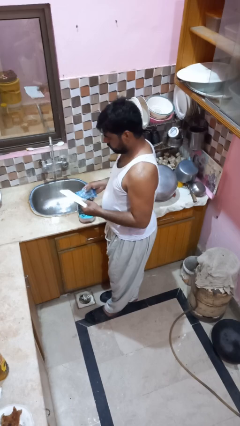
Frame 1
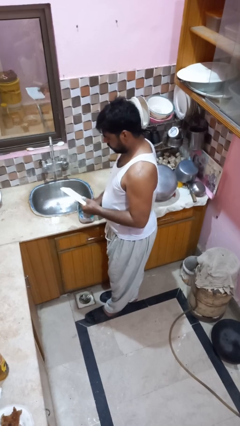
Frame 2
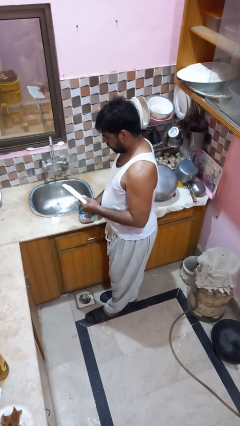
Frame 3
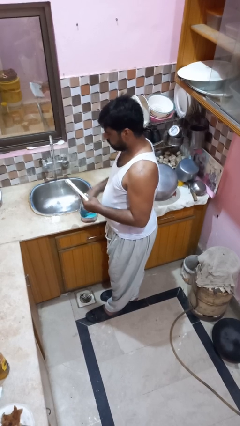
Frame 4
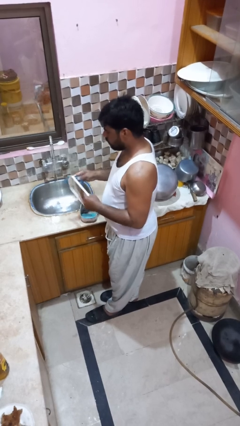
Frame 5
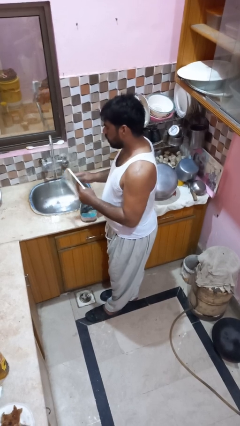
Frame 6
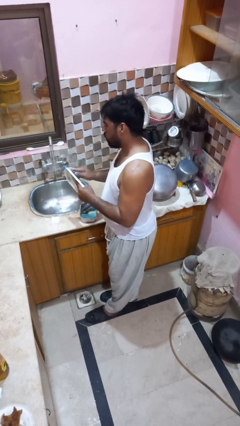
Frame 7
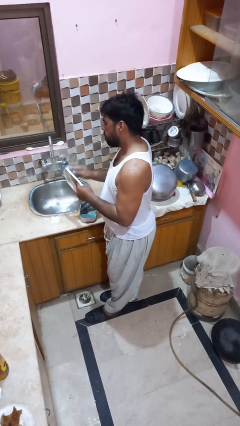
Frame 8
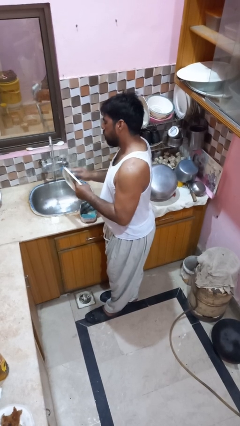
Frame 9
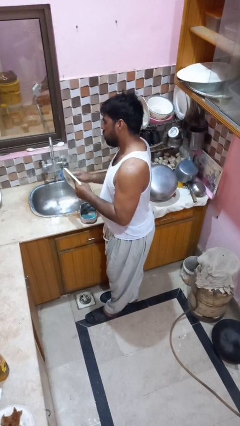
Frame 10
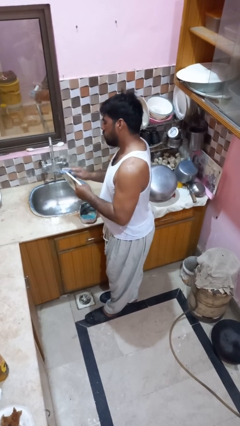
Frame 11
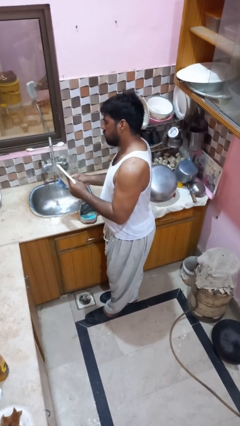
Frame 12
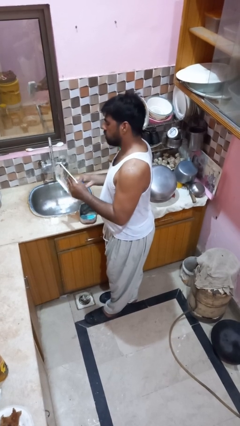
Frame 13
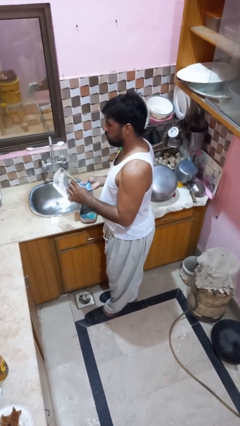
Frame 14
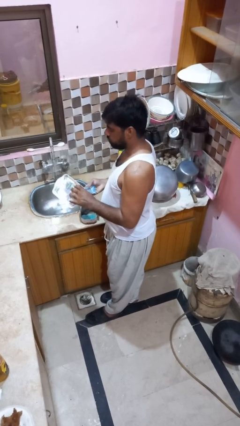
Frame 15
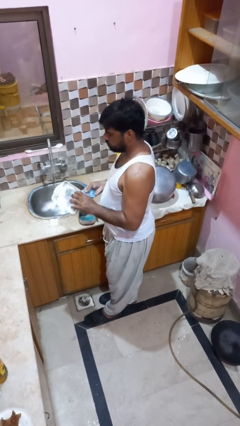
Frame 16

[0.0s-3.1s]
person washes dish

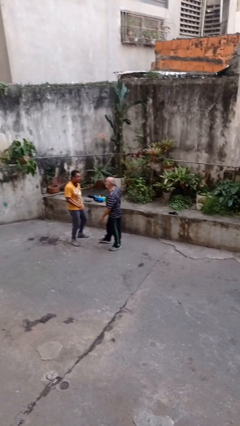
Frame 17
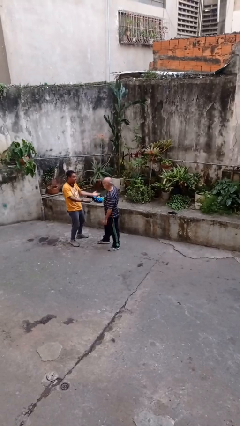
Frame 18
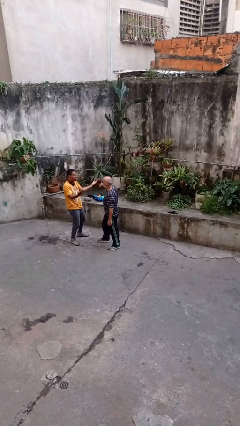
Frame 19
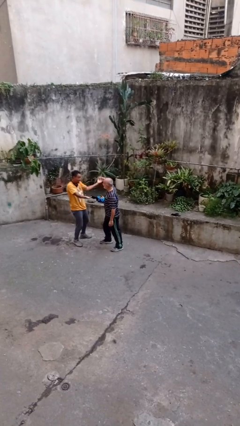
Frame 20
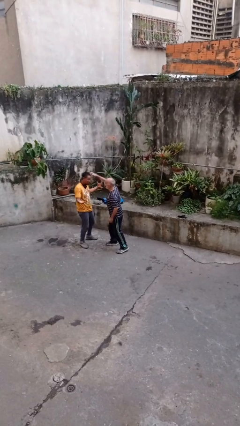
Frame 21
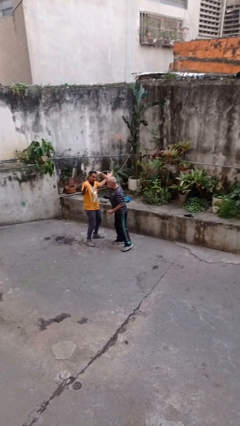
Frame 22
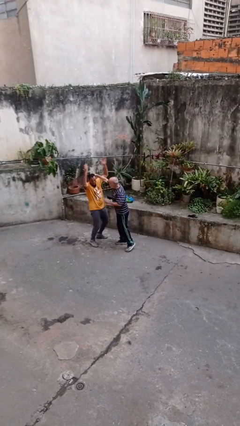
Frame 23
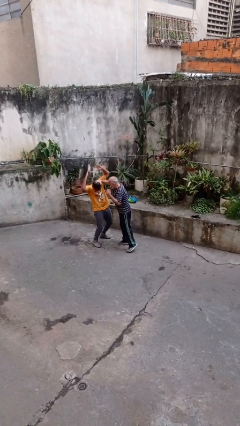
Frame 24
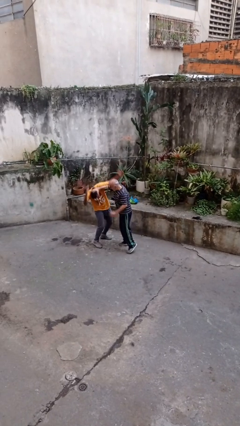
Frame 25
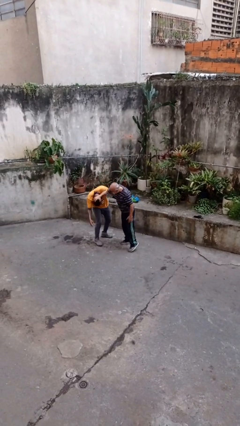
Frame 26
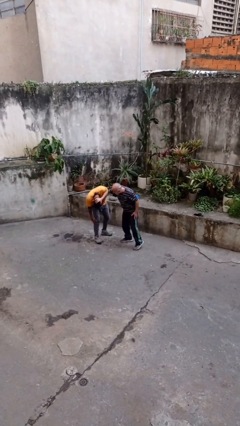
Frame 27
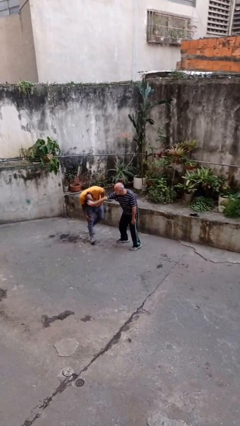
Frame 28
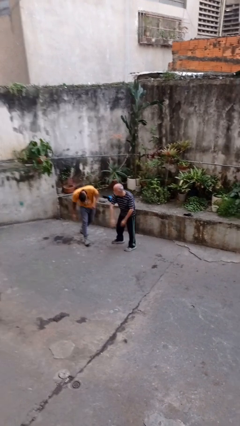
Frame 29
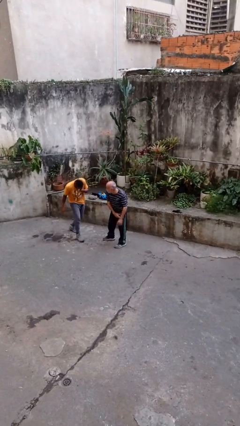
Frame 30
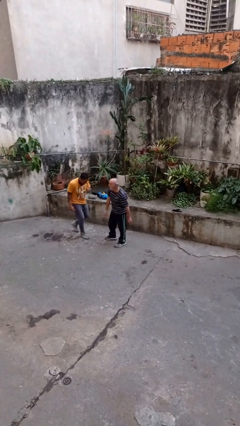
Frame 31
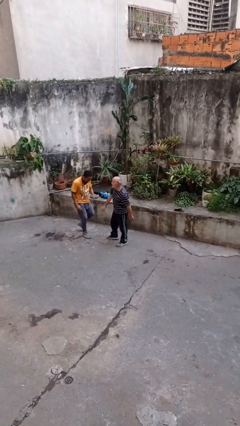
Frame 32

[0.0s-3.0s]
person grabs person by hair

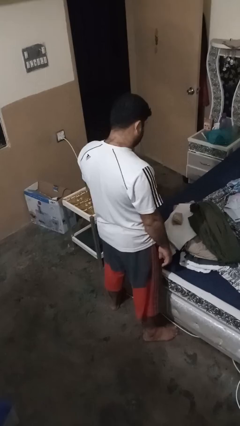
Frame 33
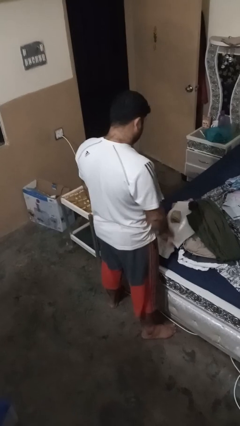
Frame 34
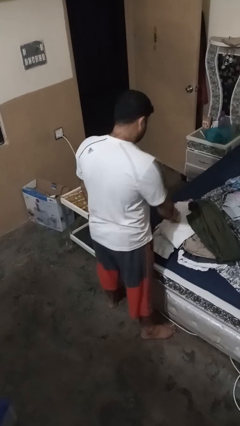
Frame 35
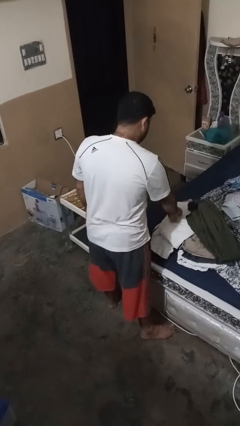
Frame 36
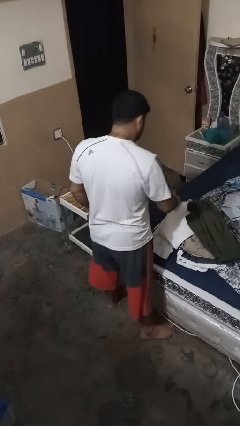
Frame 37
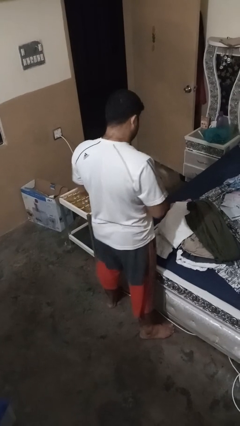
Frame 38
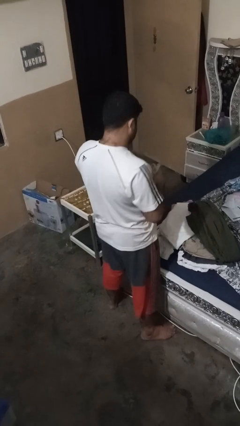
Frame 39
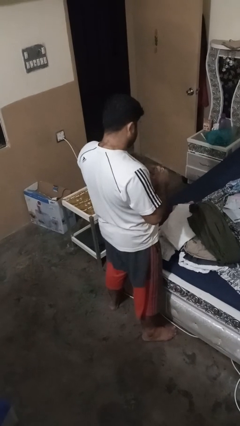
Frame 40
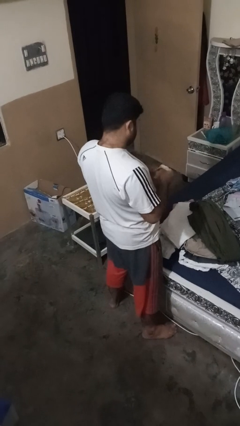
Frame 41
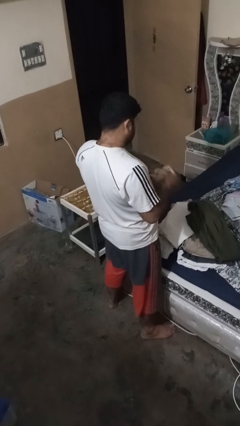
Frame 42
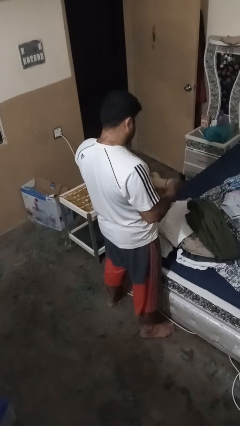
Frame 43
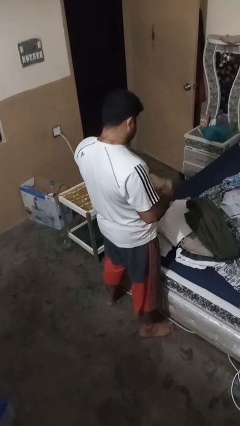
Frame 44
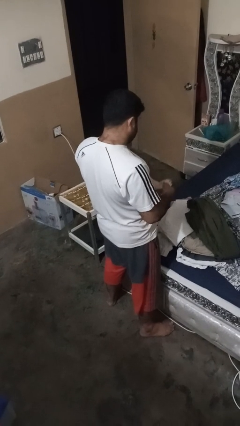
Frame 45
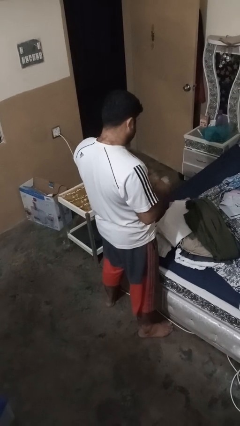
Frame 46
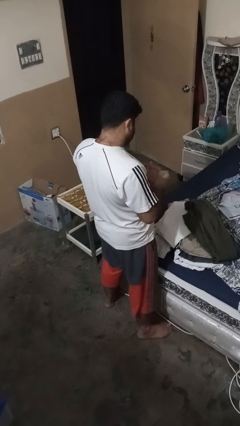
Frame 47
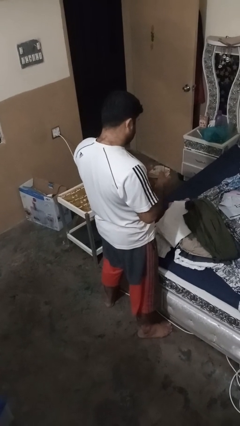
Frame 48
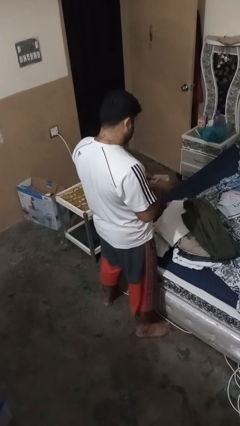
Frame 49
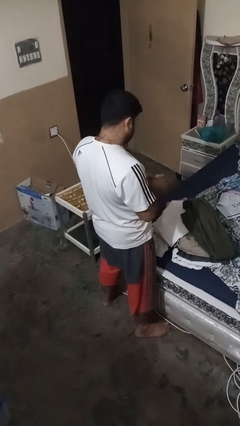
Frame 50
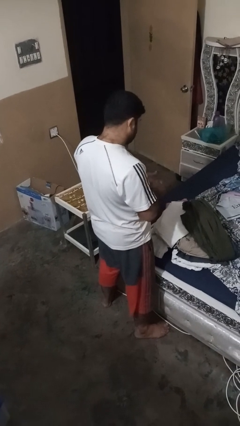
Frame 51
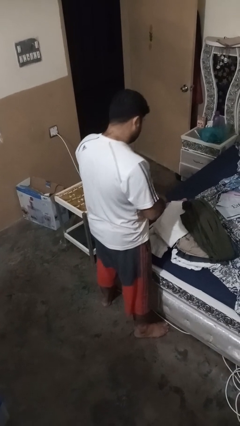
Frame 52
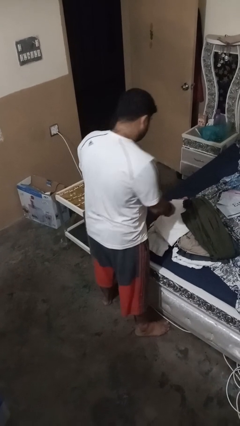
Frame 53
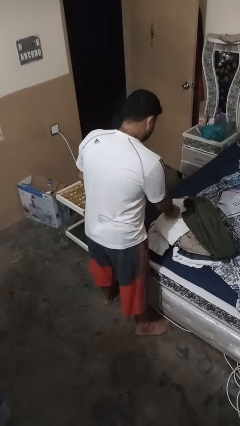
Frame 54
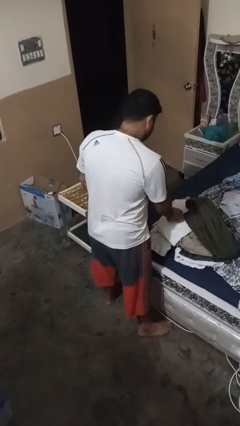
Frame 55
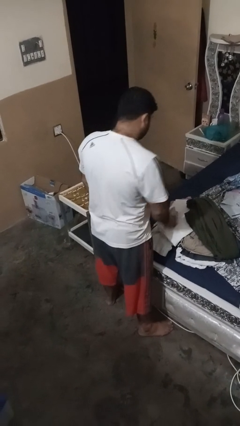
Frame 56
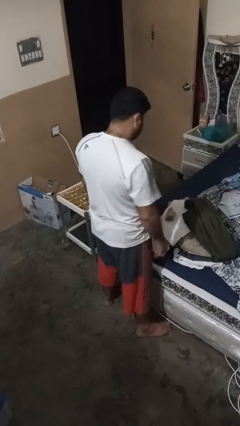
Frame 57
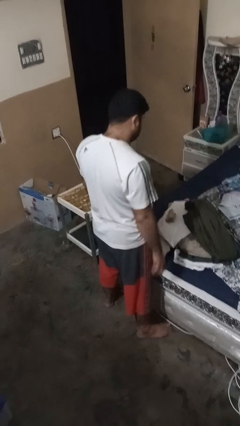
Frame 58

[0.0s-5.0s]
person folds socks

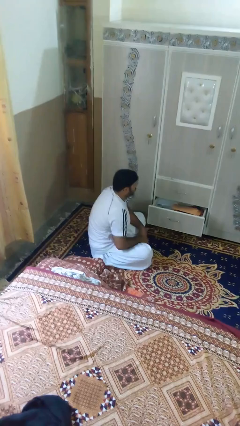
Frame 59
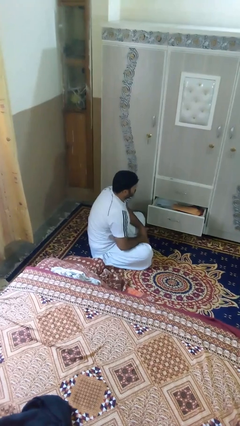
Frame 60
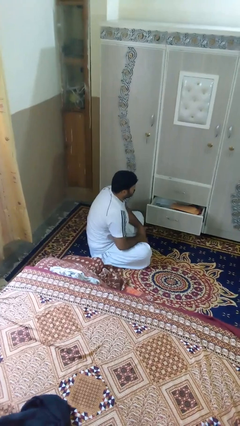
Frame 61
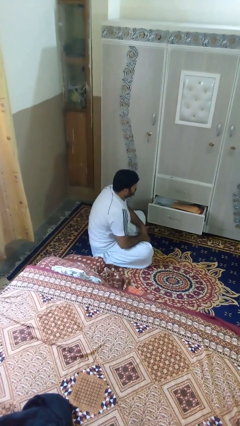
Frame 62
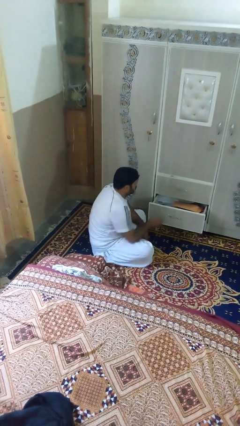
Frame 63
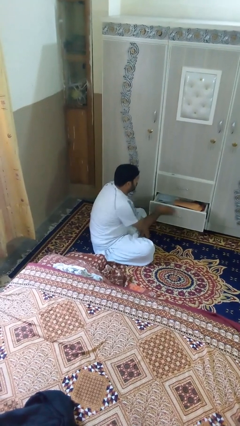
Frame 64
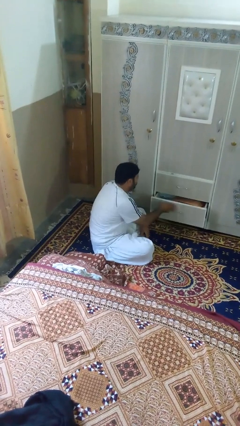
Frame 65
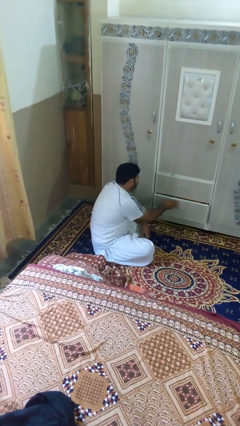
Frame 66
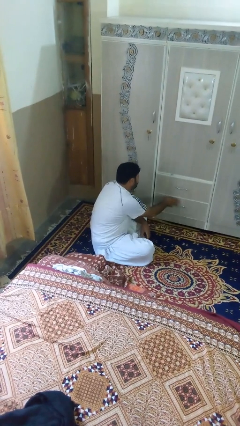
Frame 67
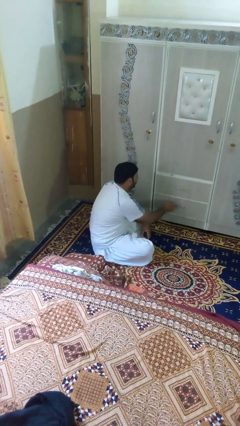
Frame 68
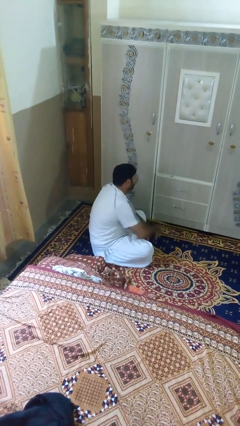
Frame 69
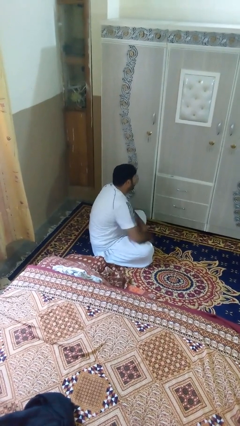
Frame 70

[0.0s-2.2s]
person closes dresser drawer

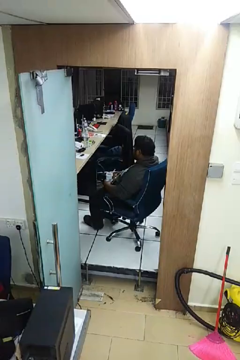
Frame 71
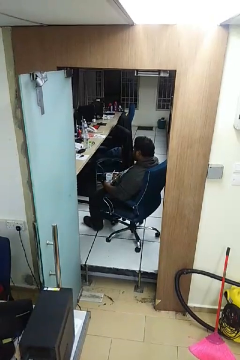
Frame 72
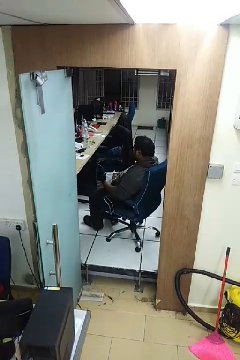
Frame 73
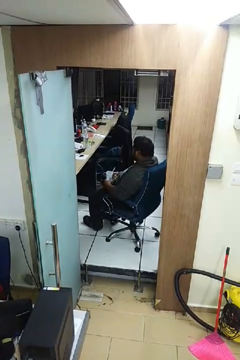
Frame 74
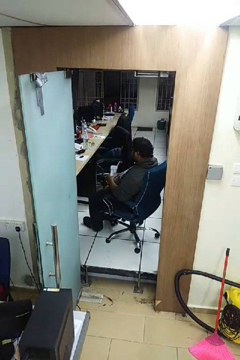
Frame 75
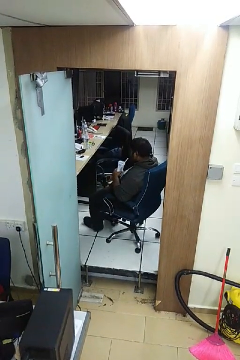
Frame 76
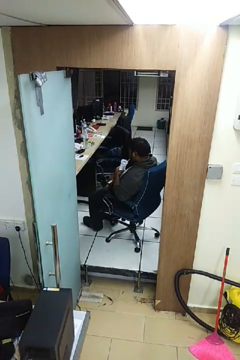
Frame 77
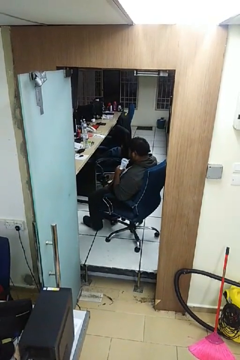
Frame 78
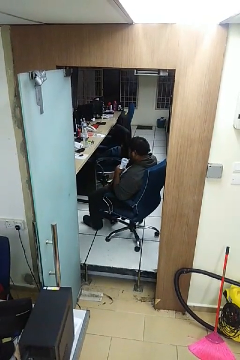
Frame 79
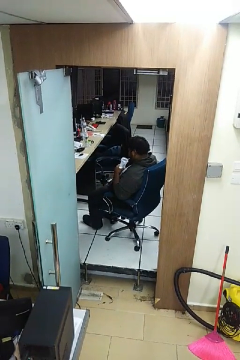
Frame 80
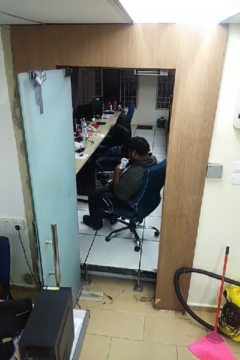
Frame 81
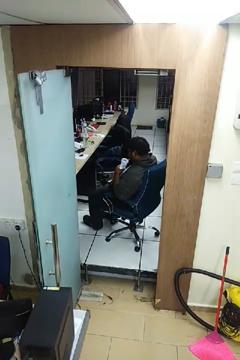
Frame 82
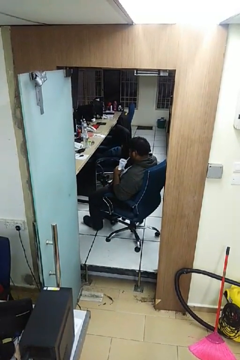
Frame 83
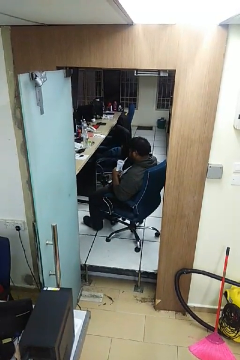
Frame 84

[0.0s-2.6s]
person drinks from straw

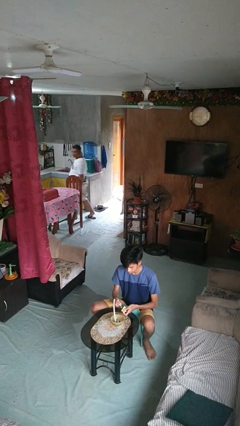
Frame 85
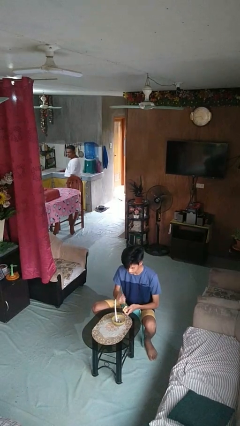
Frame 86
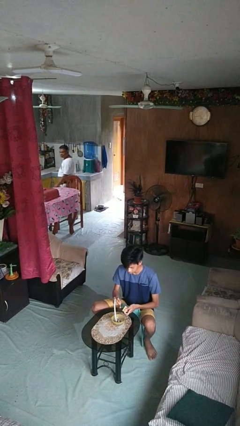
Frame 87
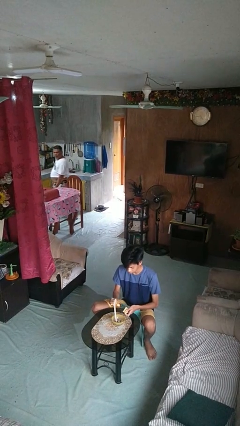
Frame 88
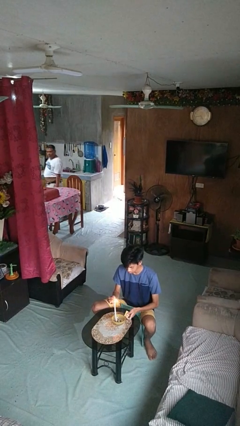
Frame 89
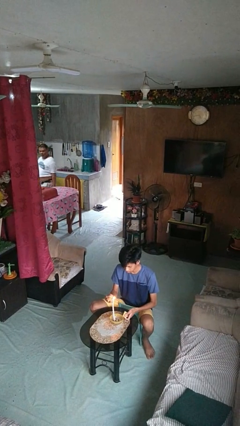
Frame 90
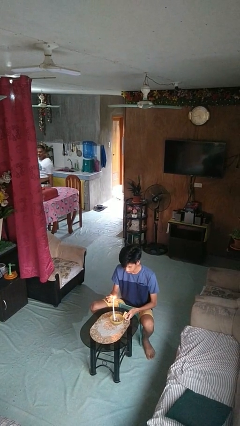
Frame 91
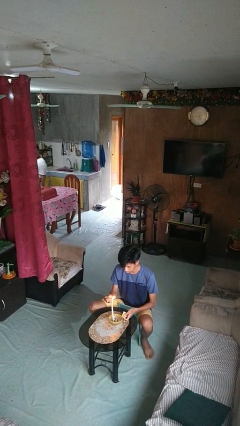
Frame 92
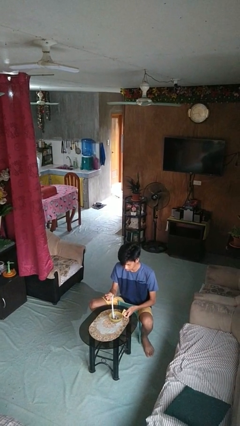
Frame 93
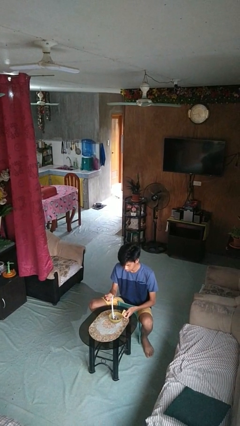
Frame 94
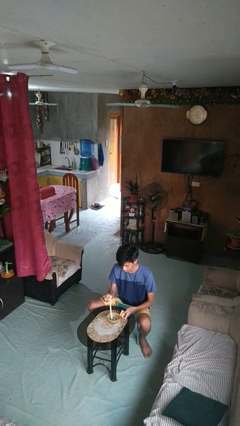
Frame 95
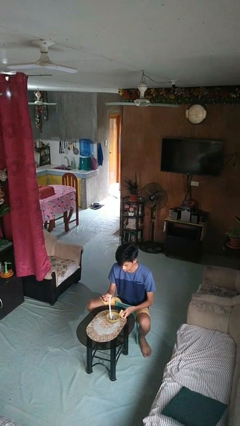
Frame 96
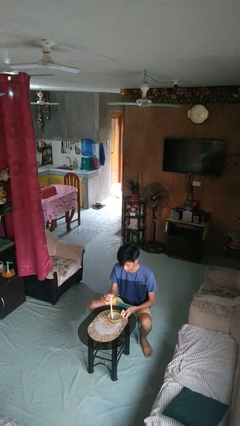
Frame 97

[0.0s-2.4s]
person lights candle
